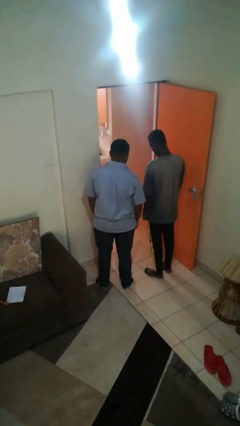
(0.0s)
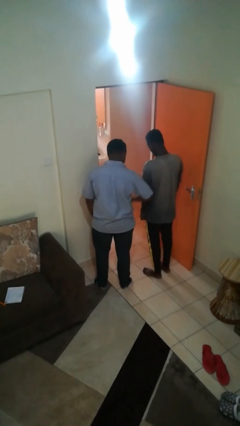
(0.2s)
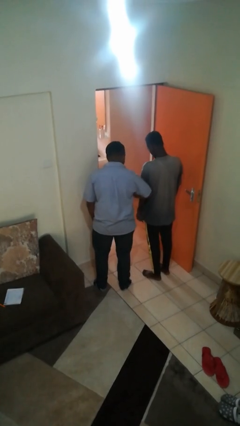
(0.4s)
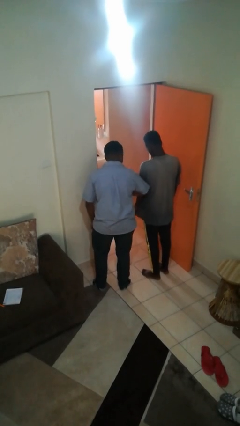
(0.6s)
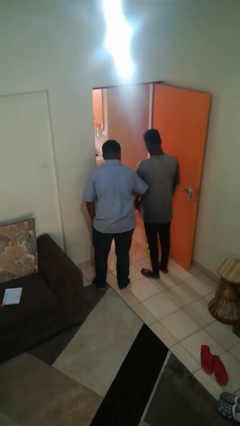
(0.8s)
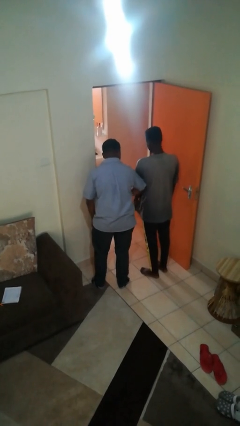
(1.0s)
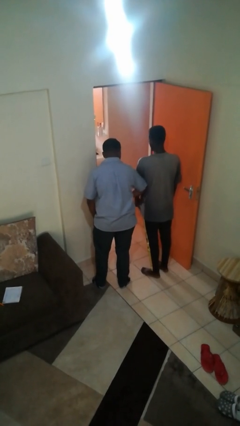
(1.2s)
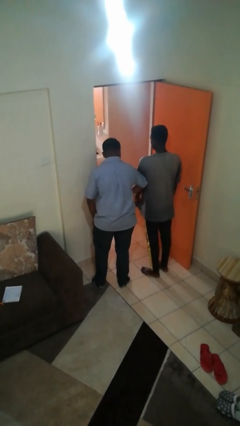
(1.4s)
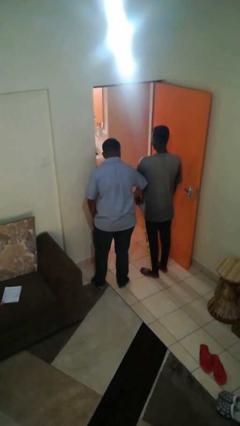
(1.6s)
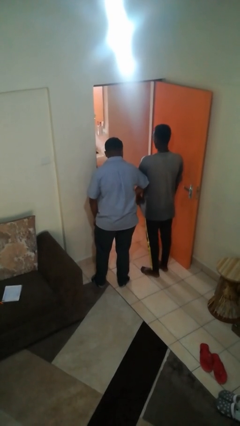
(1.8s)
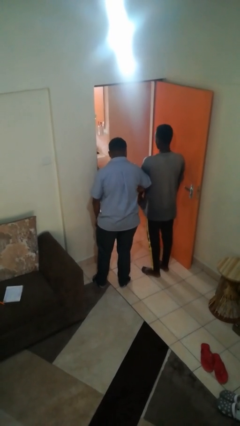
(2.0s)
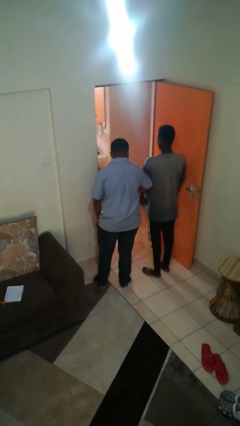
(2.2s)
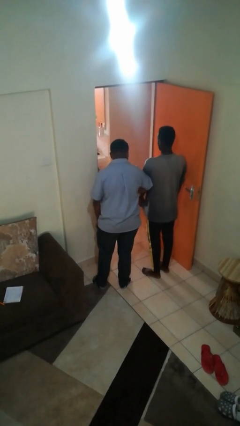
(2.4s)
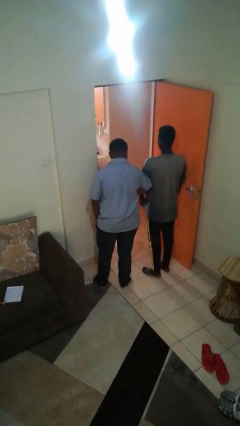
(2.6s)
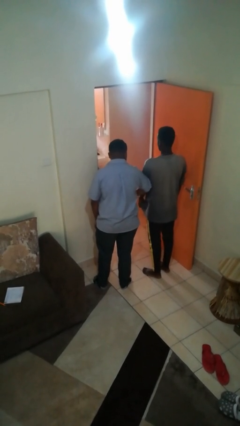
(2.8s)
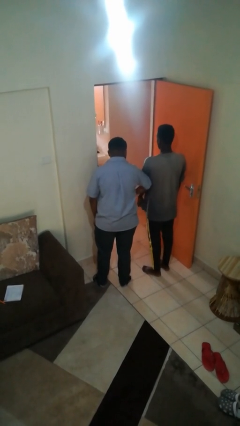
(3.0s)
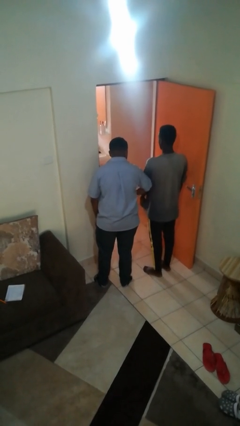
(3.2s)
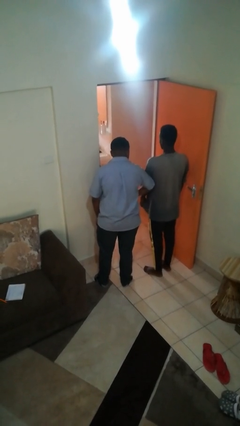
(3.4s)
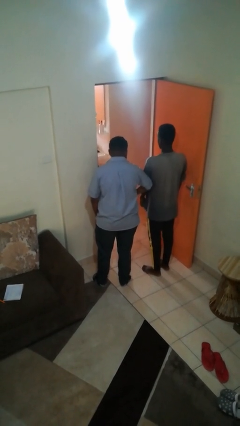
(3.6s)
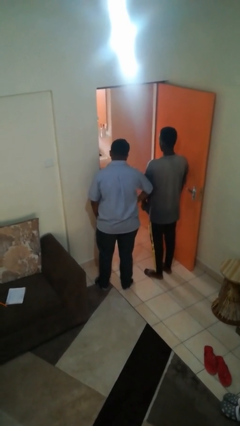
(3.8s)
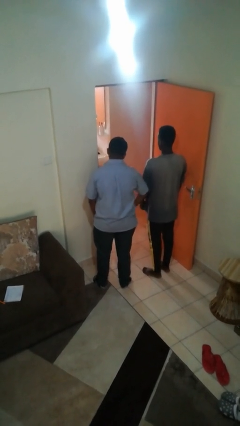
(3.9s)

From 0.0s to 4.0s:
person nudges person with elbow

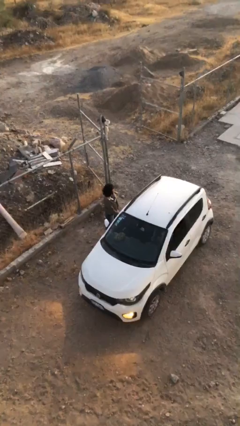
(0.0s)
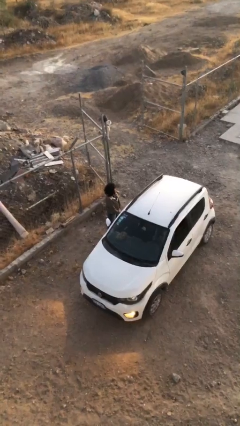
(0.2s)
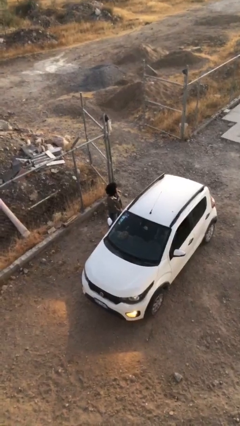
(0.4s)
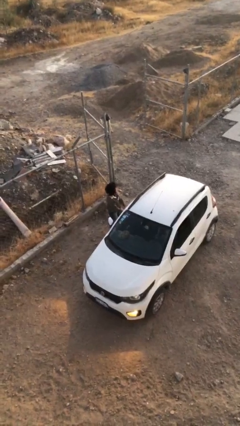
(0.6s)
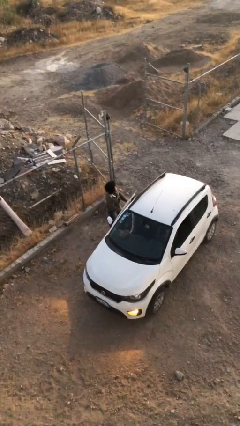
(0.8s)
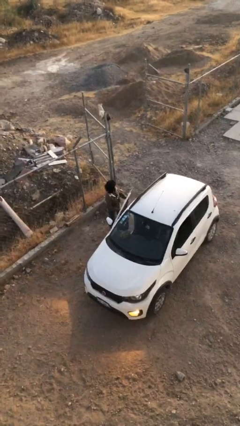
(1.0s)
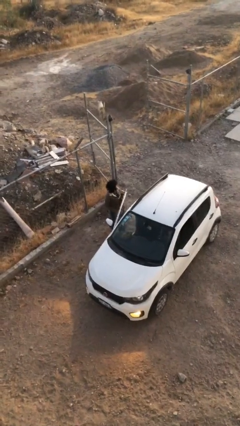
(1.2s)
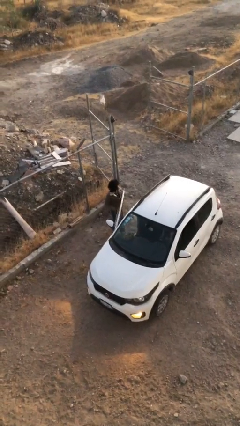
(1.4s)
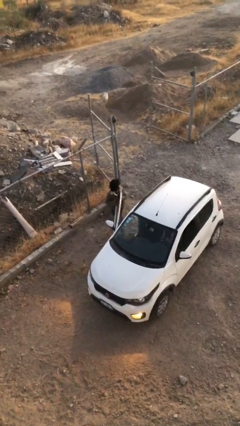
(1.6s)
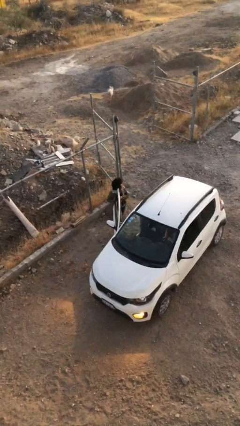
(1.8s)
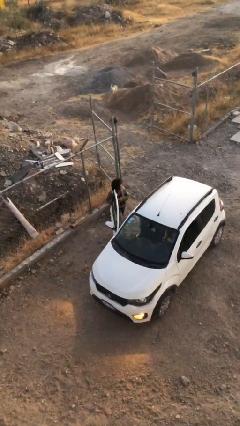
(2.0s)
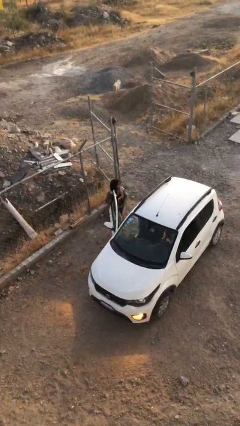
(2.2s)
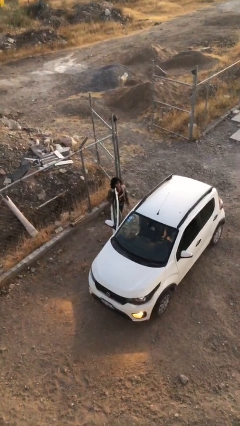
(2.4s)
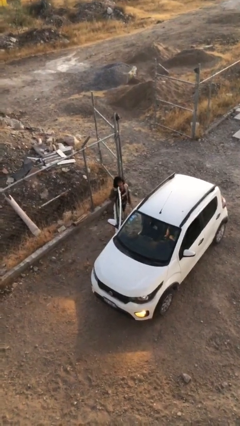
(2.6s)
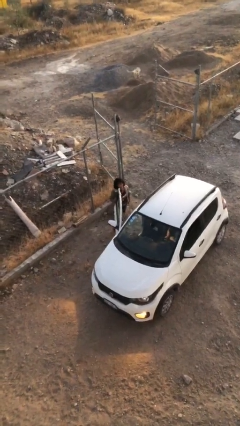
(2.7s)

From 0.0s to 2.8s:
person opens car door

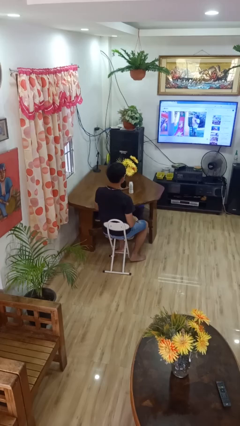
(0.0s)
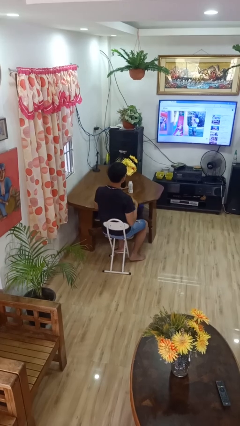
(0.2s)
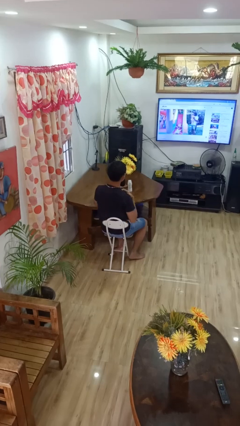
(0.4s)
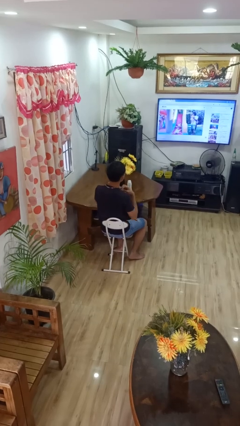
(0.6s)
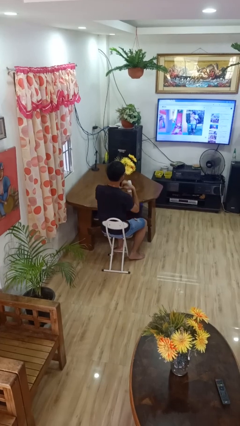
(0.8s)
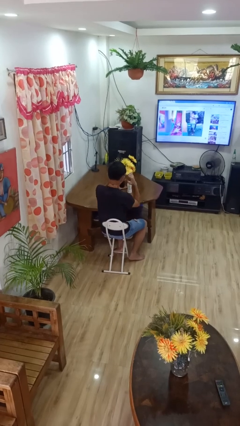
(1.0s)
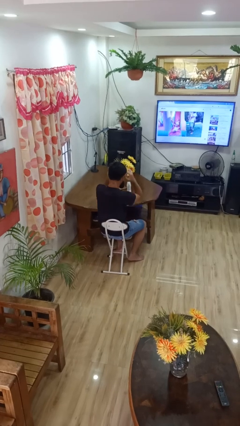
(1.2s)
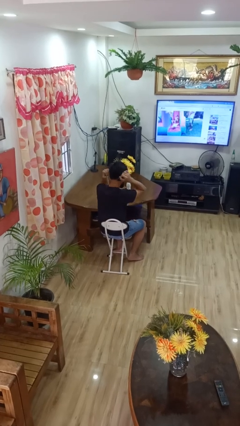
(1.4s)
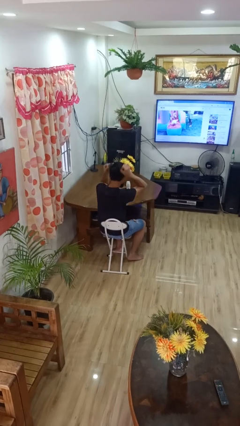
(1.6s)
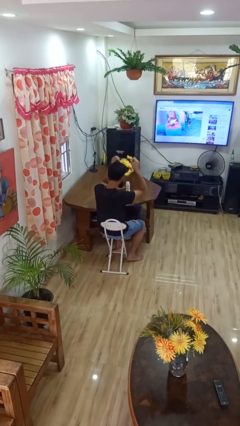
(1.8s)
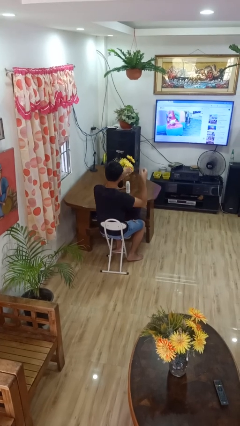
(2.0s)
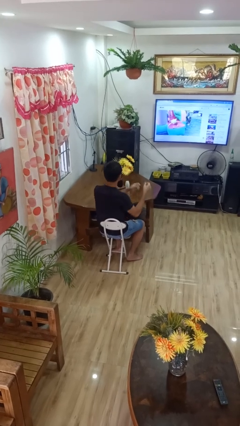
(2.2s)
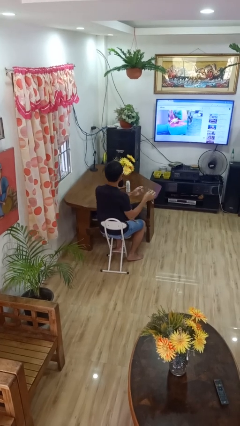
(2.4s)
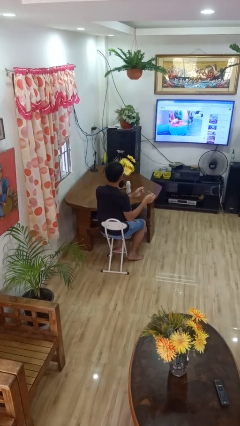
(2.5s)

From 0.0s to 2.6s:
person takes off necklace

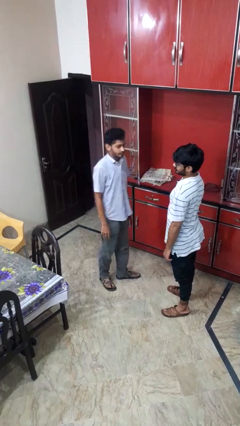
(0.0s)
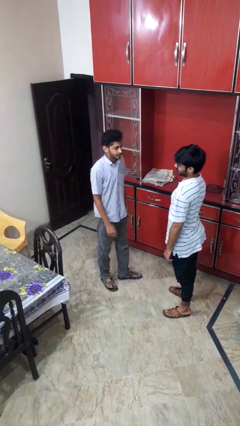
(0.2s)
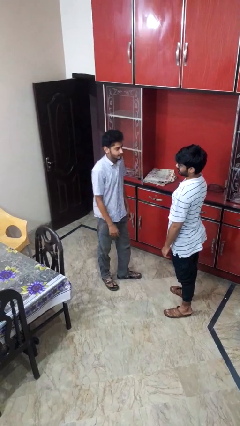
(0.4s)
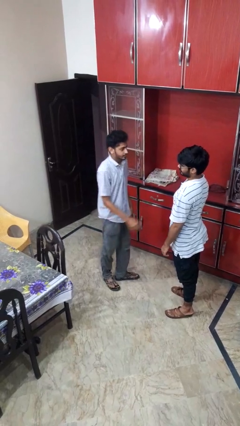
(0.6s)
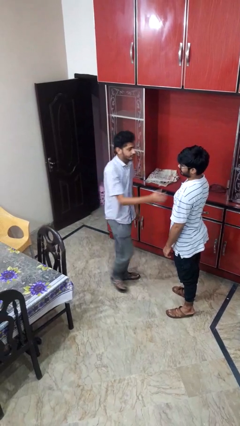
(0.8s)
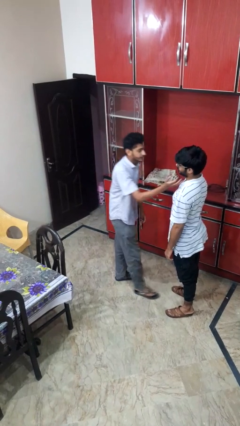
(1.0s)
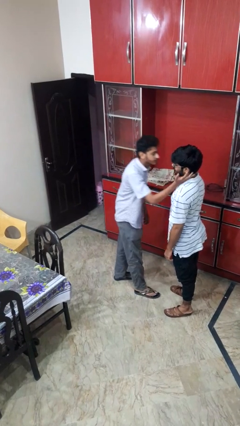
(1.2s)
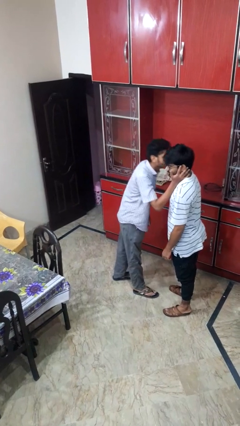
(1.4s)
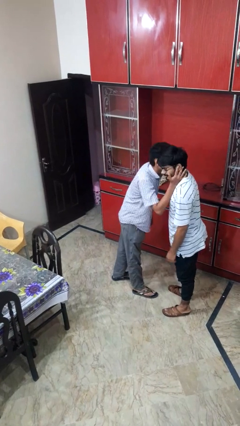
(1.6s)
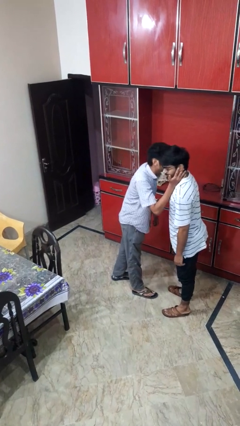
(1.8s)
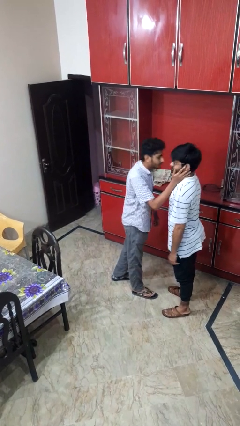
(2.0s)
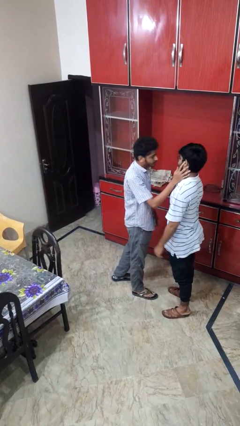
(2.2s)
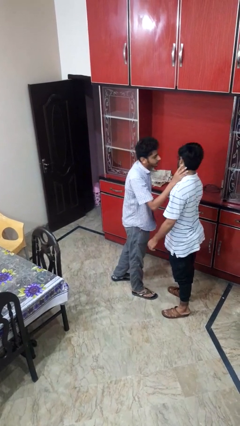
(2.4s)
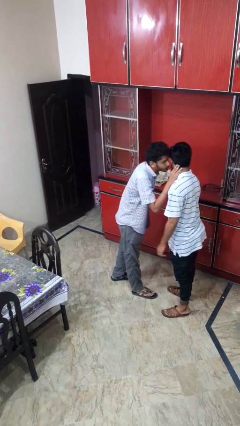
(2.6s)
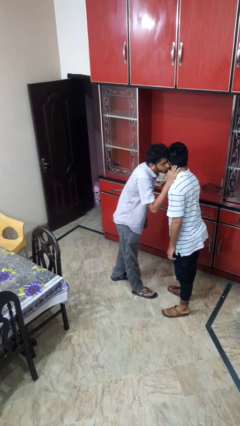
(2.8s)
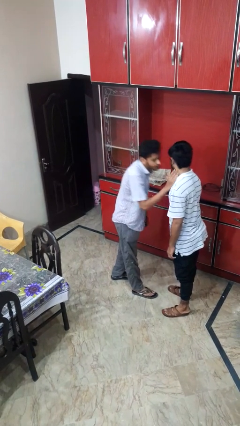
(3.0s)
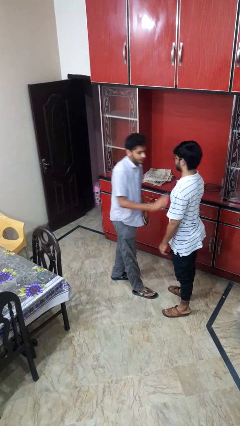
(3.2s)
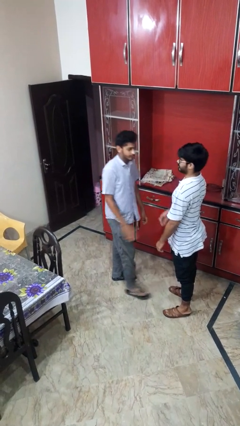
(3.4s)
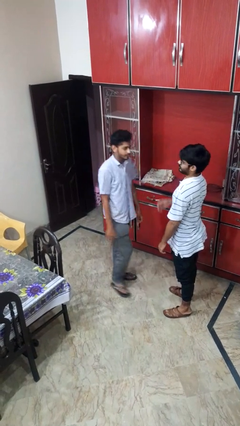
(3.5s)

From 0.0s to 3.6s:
person kisses cheek of person

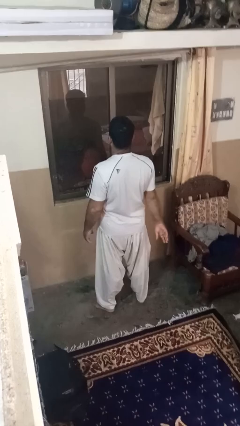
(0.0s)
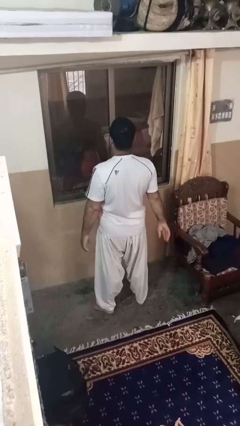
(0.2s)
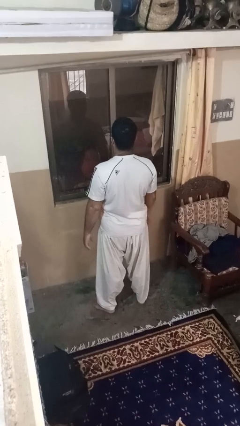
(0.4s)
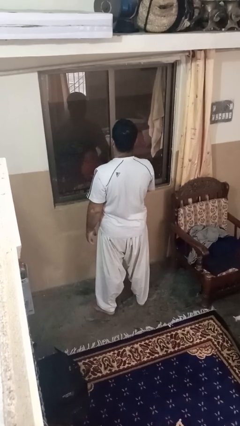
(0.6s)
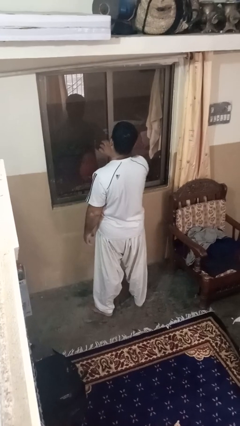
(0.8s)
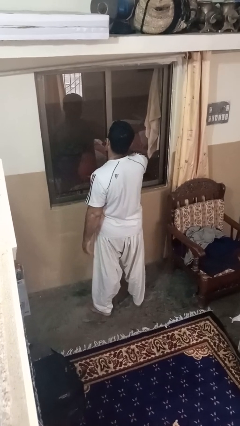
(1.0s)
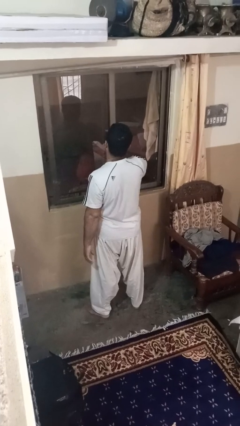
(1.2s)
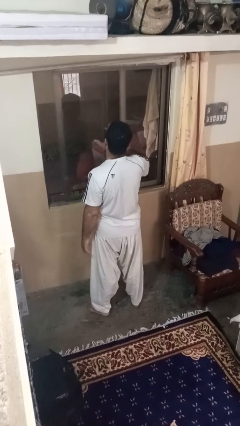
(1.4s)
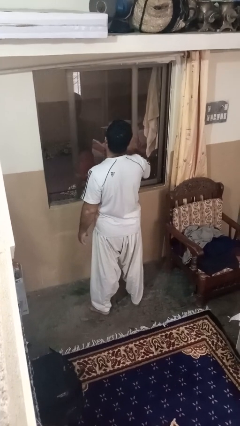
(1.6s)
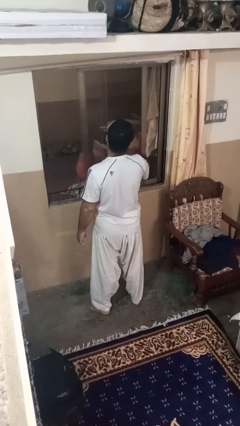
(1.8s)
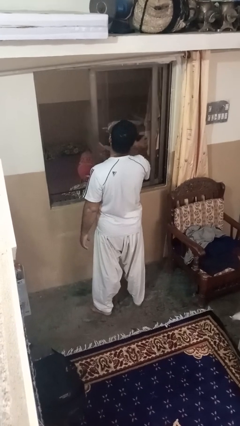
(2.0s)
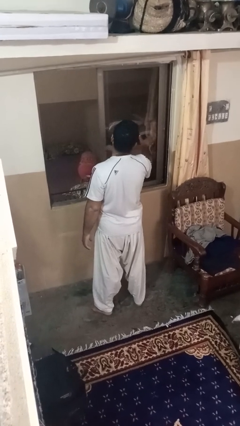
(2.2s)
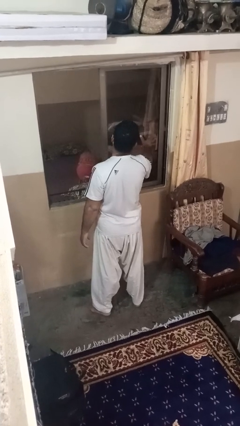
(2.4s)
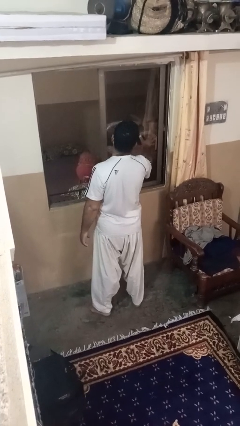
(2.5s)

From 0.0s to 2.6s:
person opens home window

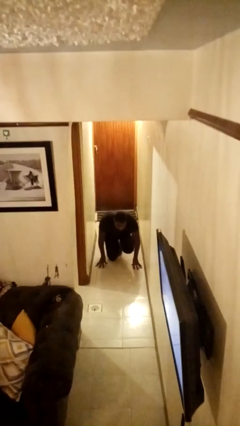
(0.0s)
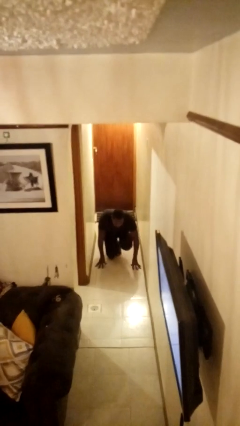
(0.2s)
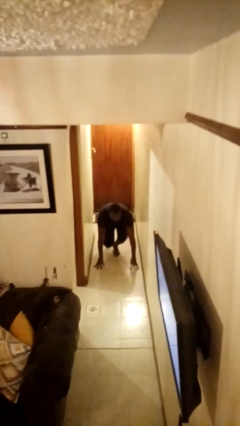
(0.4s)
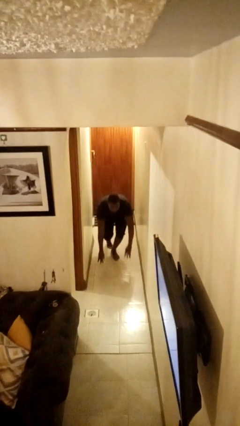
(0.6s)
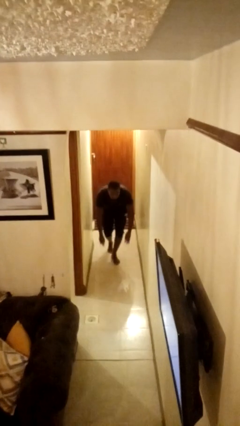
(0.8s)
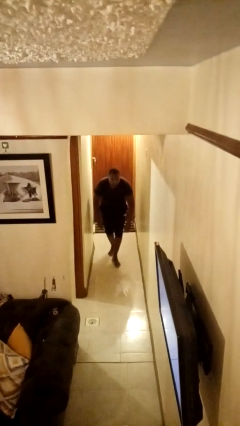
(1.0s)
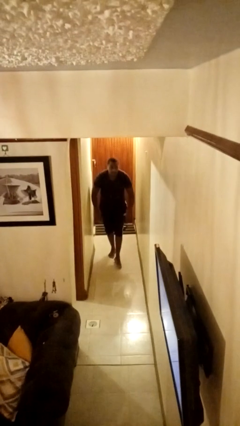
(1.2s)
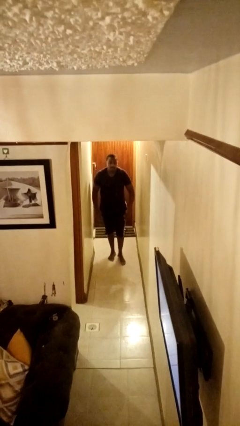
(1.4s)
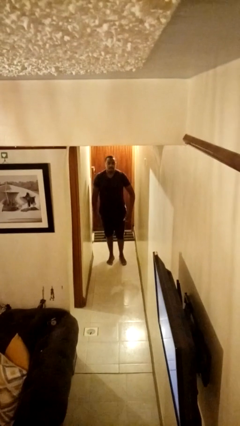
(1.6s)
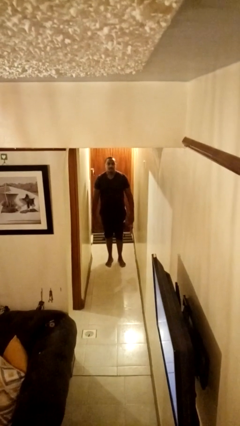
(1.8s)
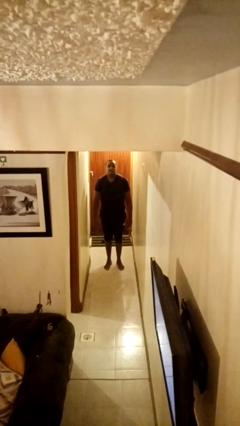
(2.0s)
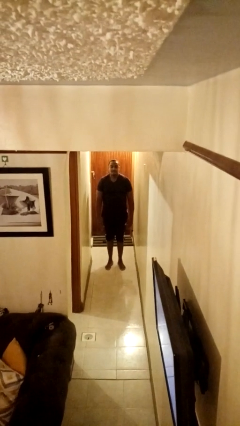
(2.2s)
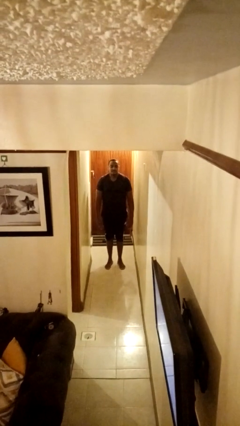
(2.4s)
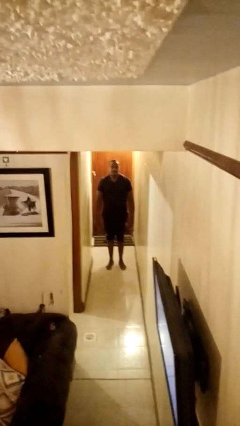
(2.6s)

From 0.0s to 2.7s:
person stands up from floor
